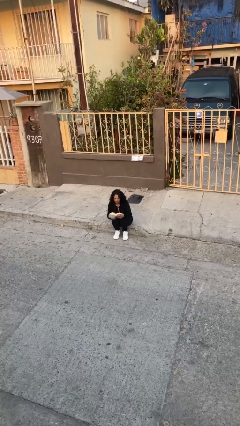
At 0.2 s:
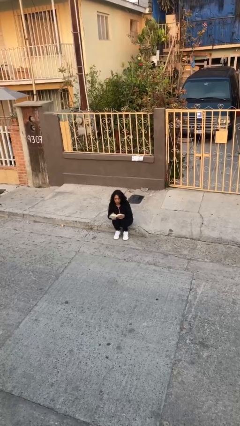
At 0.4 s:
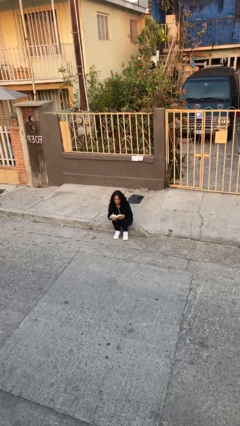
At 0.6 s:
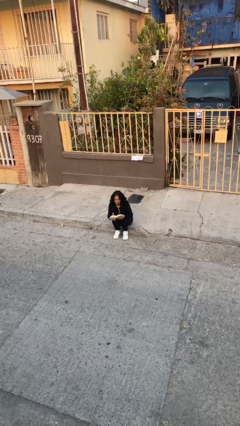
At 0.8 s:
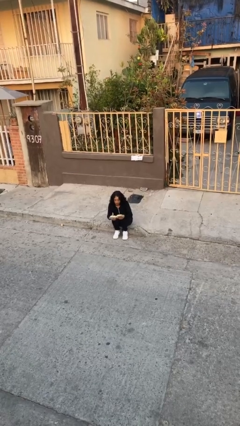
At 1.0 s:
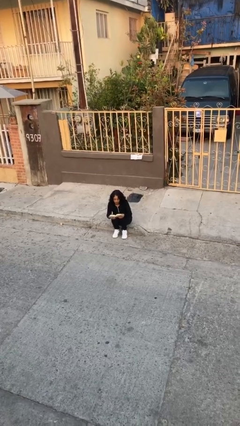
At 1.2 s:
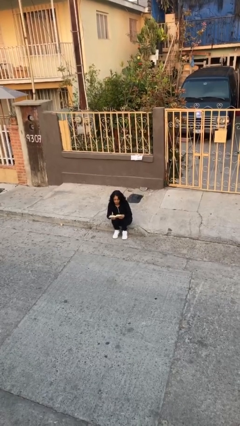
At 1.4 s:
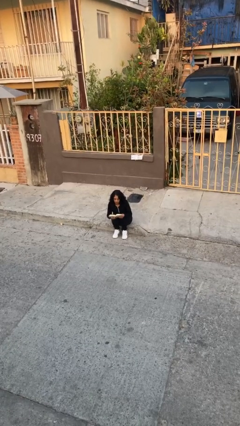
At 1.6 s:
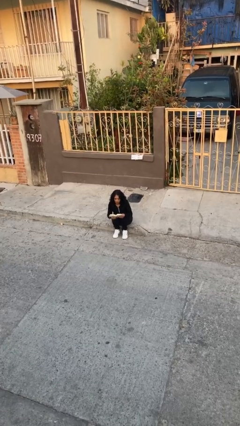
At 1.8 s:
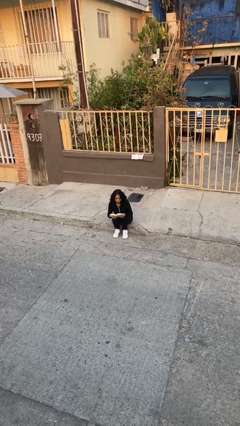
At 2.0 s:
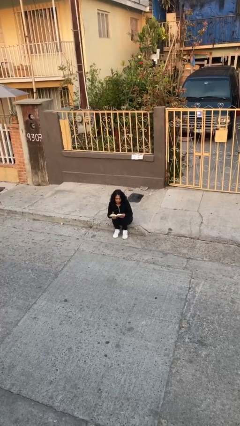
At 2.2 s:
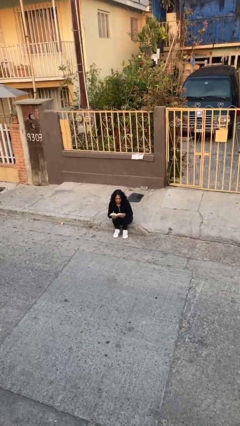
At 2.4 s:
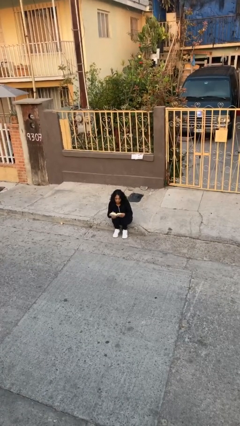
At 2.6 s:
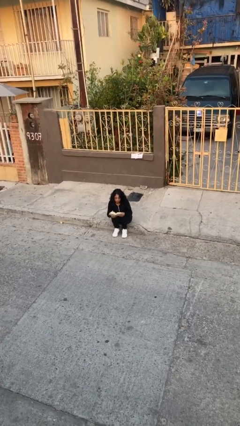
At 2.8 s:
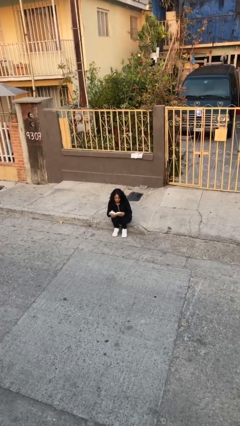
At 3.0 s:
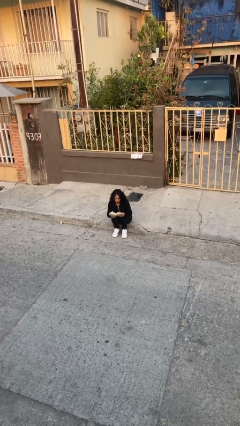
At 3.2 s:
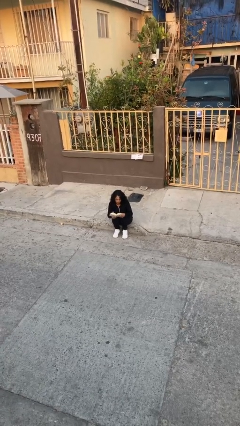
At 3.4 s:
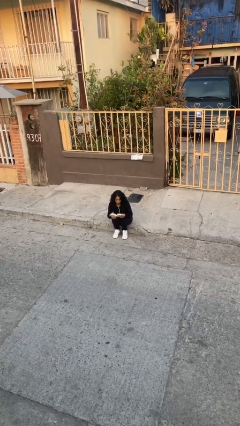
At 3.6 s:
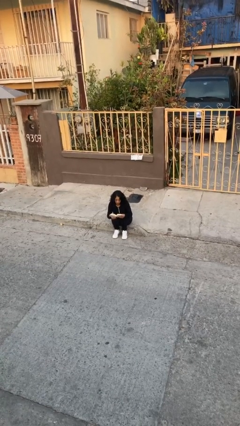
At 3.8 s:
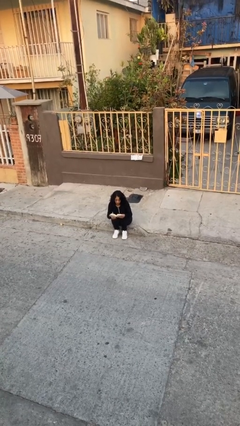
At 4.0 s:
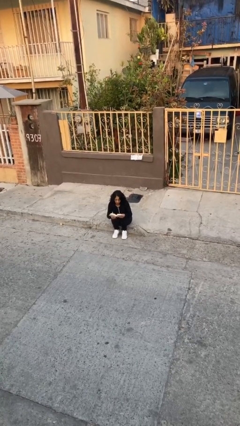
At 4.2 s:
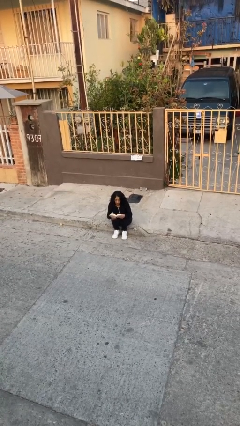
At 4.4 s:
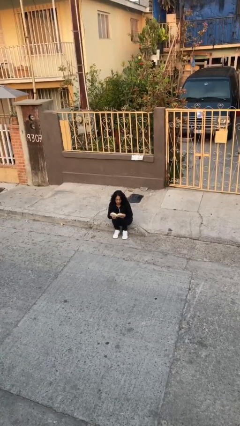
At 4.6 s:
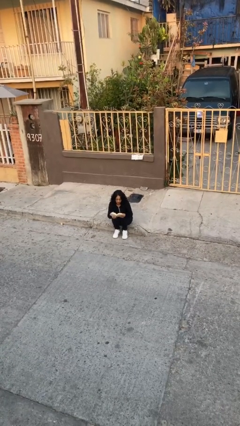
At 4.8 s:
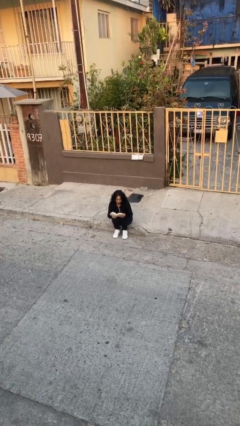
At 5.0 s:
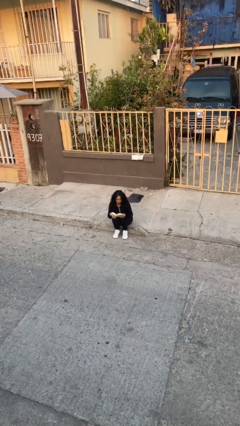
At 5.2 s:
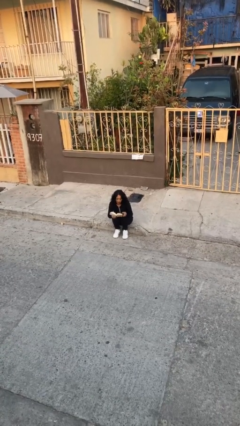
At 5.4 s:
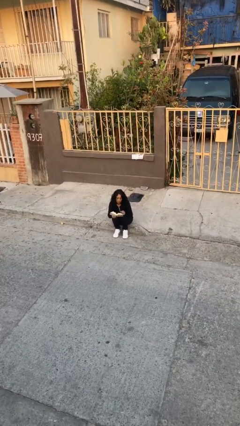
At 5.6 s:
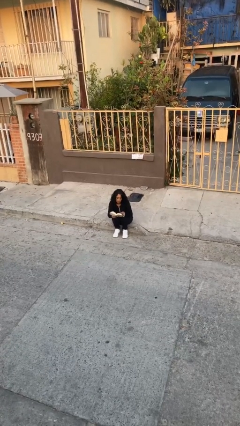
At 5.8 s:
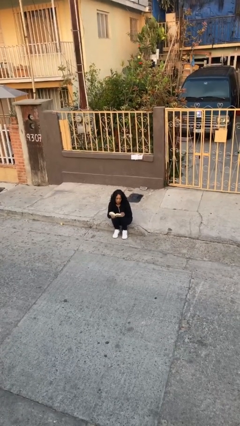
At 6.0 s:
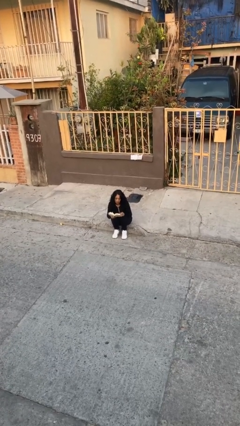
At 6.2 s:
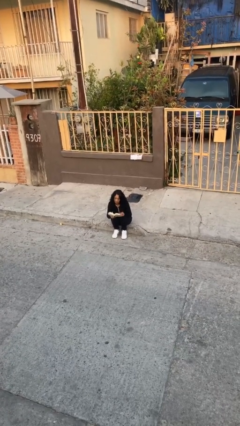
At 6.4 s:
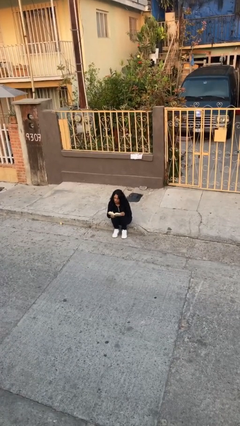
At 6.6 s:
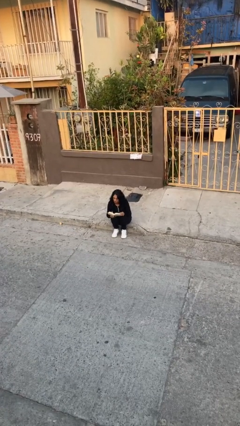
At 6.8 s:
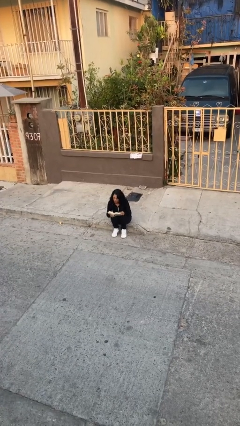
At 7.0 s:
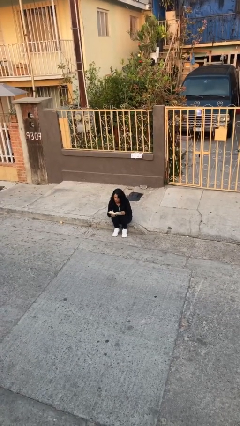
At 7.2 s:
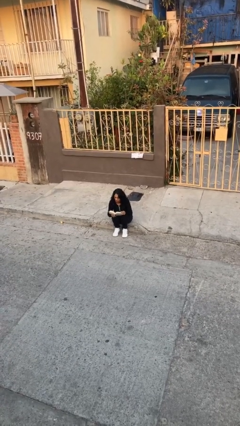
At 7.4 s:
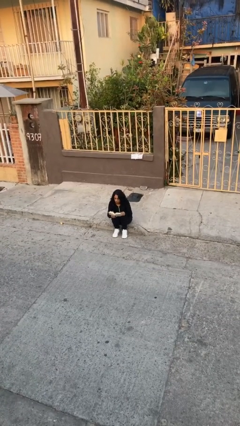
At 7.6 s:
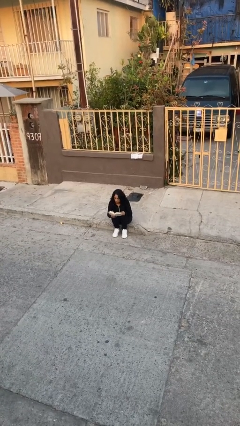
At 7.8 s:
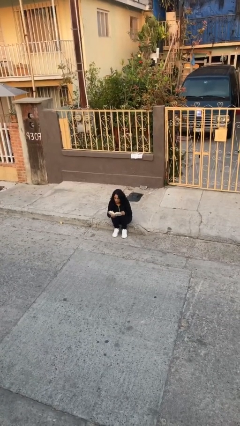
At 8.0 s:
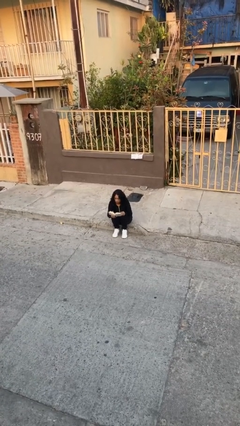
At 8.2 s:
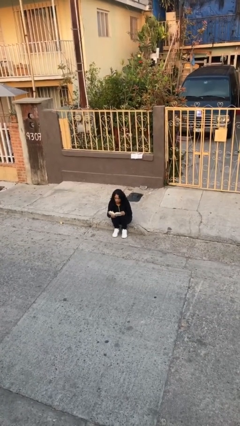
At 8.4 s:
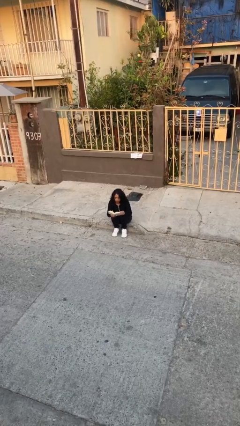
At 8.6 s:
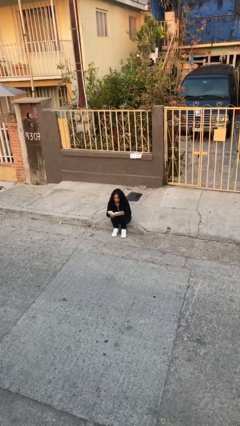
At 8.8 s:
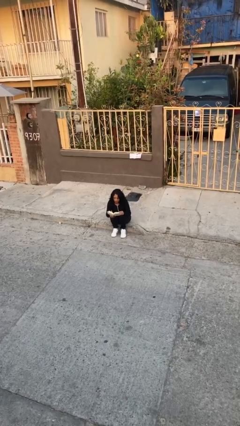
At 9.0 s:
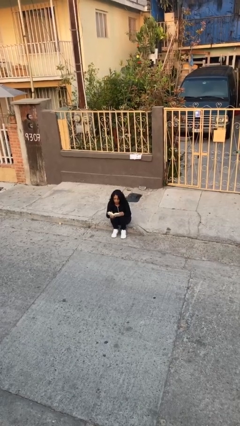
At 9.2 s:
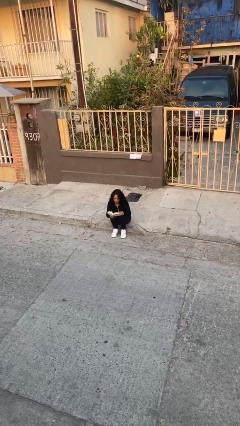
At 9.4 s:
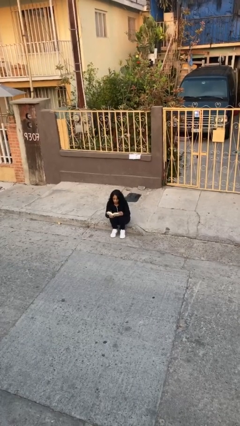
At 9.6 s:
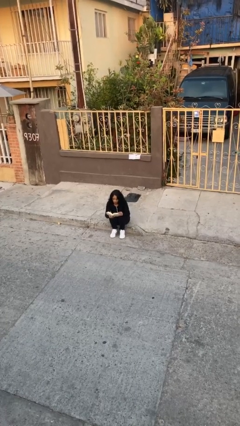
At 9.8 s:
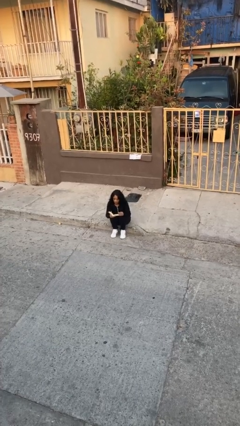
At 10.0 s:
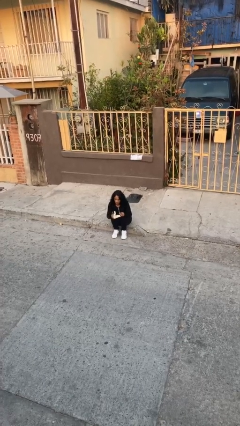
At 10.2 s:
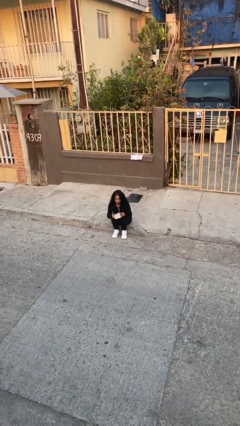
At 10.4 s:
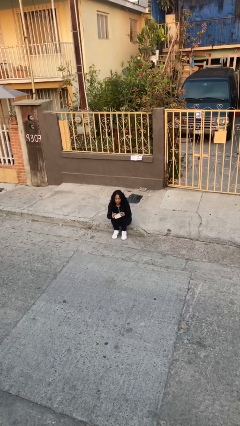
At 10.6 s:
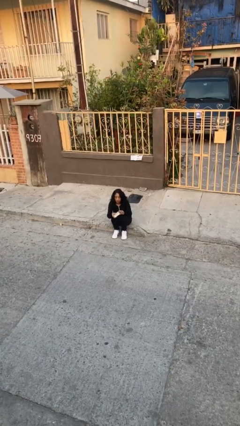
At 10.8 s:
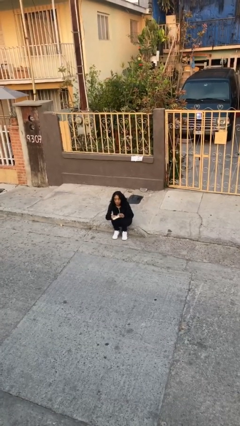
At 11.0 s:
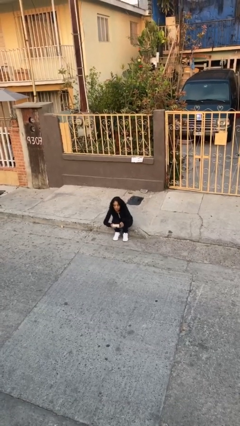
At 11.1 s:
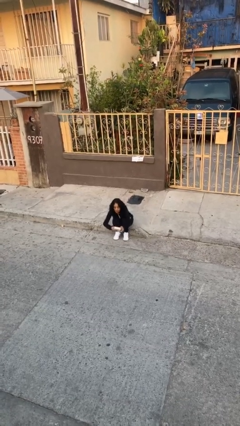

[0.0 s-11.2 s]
person reads document

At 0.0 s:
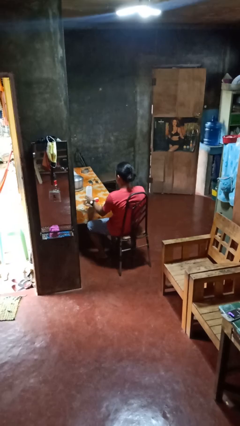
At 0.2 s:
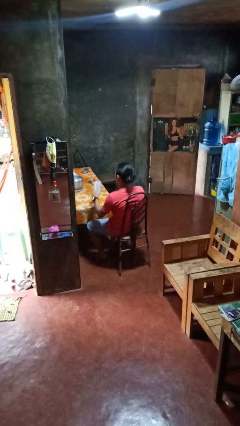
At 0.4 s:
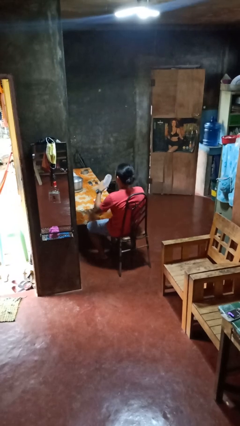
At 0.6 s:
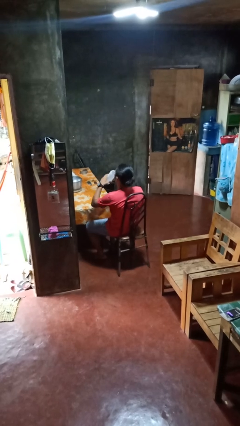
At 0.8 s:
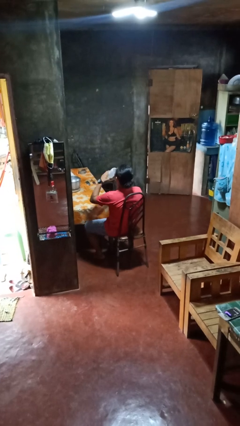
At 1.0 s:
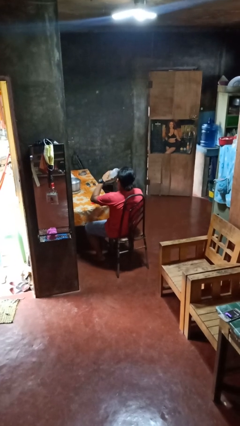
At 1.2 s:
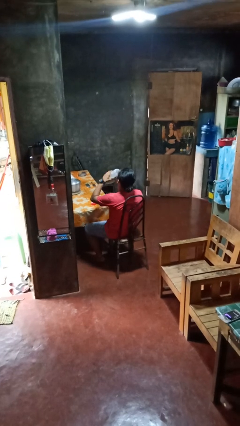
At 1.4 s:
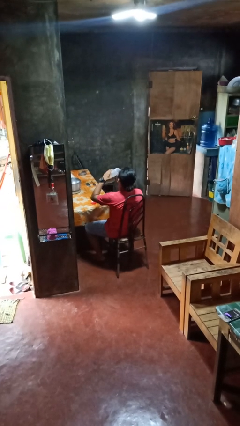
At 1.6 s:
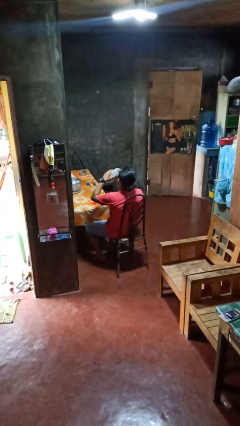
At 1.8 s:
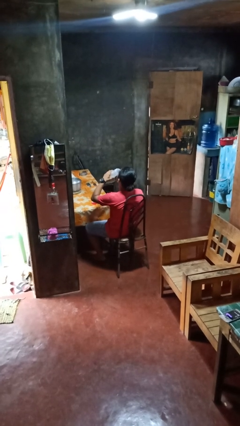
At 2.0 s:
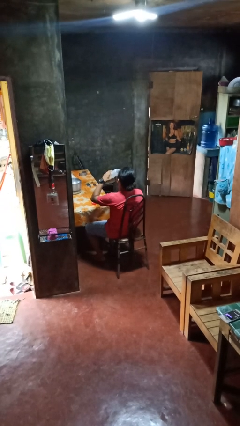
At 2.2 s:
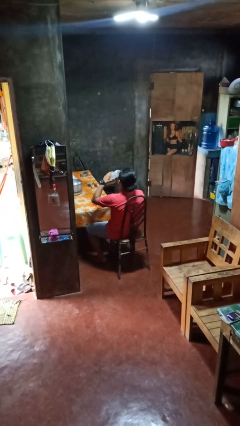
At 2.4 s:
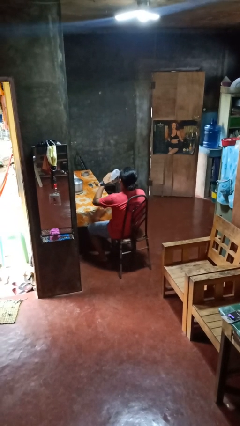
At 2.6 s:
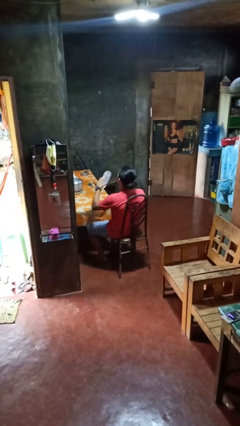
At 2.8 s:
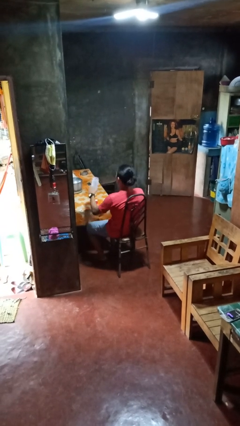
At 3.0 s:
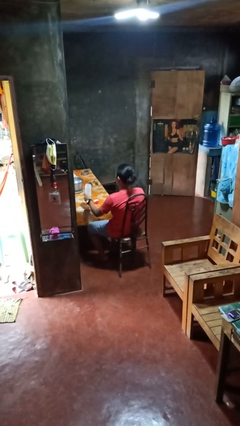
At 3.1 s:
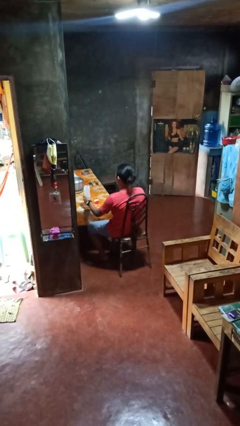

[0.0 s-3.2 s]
person drinks from bottle

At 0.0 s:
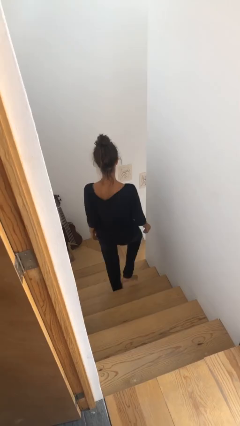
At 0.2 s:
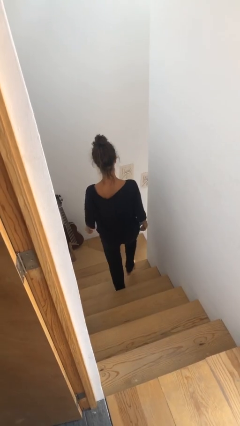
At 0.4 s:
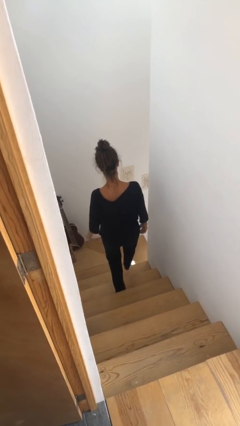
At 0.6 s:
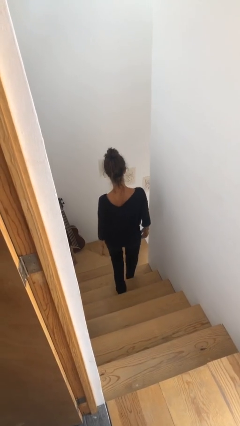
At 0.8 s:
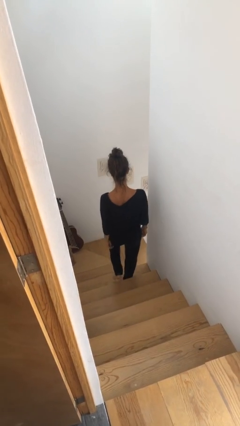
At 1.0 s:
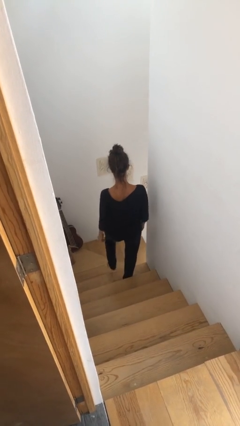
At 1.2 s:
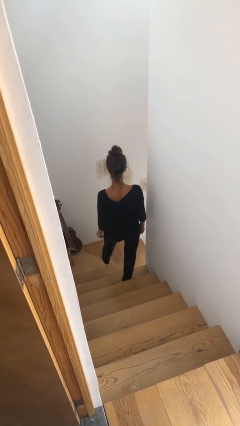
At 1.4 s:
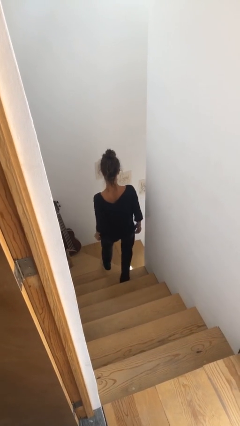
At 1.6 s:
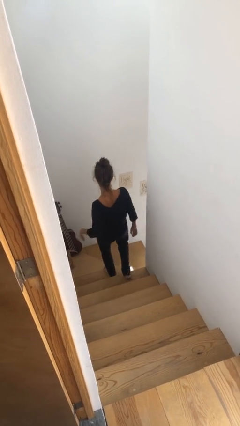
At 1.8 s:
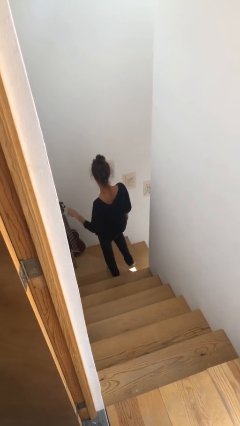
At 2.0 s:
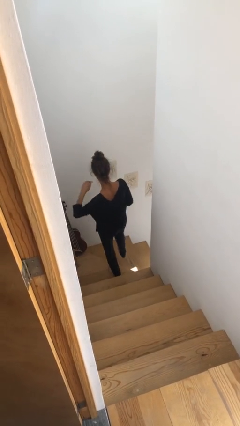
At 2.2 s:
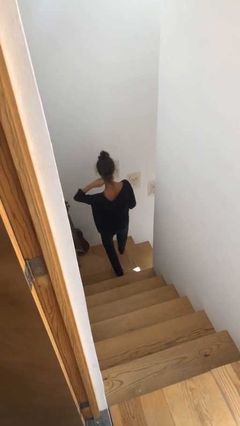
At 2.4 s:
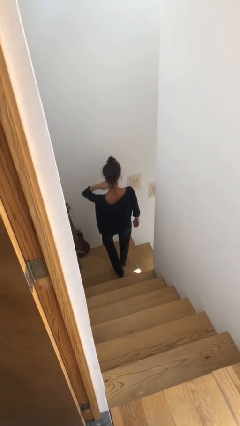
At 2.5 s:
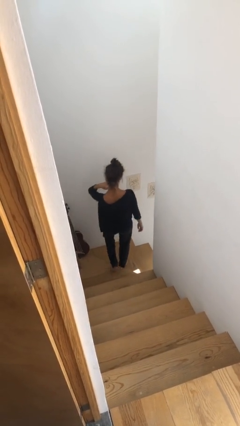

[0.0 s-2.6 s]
person climbs down stairs

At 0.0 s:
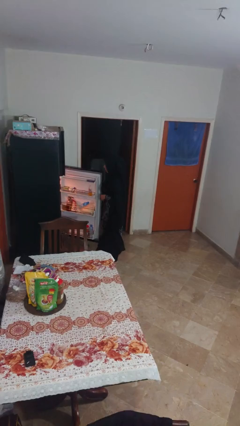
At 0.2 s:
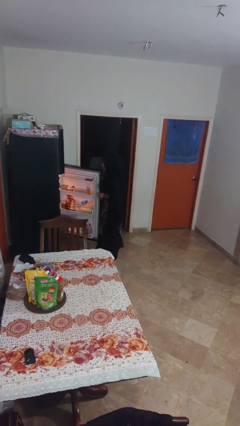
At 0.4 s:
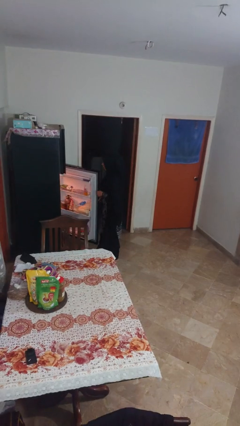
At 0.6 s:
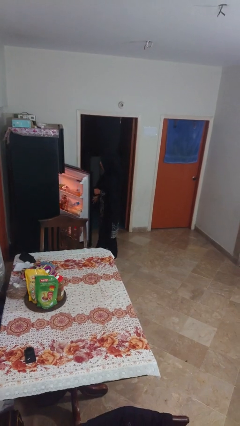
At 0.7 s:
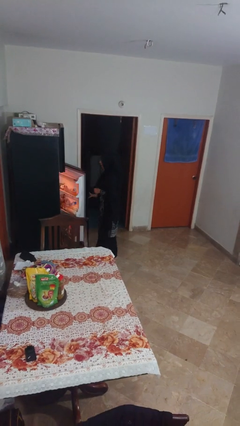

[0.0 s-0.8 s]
person takes object from refrigerator

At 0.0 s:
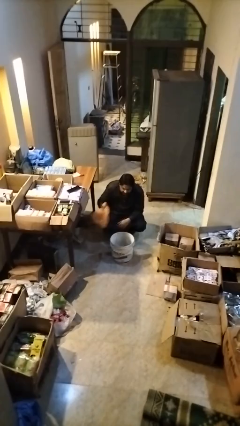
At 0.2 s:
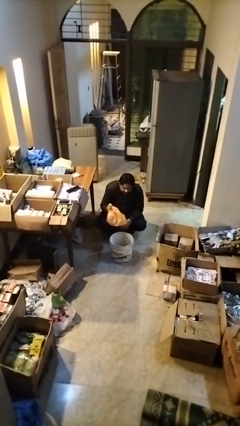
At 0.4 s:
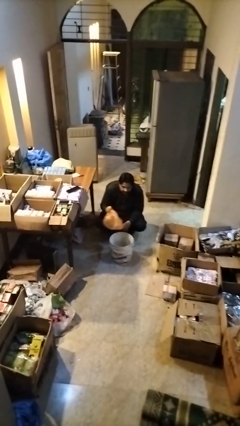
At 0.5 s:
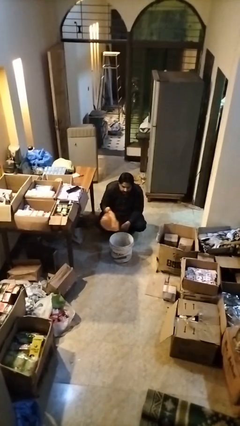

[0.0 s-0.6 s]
person removes trashbag from trashcan
